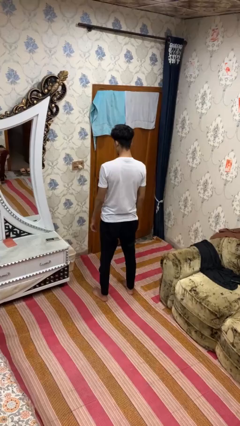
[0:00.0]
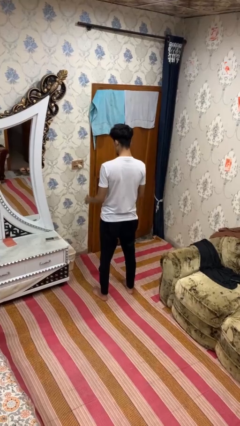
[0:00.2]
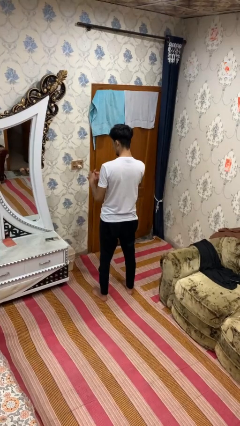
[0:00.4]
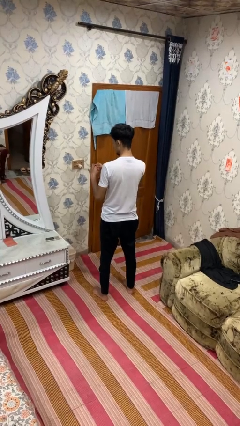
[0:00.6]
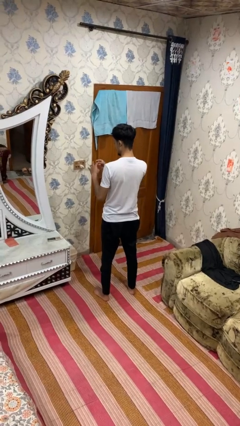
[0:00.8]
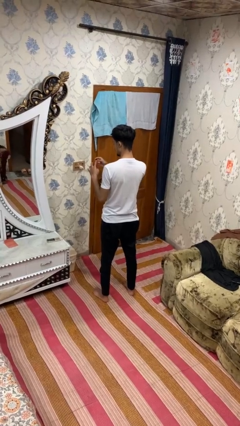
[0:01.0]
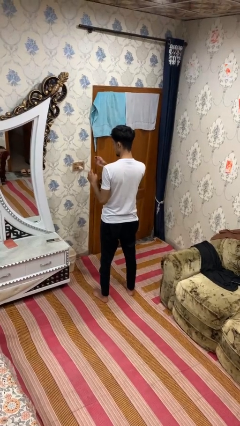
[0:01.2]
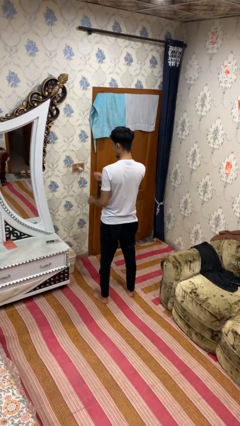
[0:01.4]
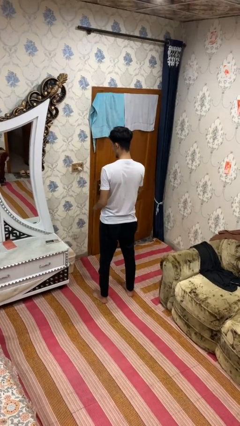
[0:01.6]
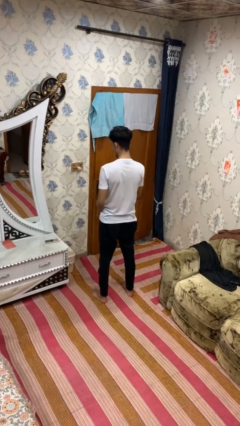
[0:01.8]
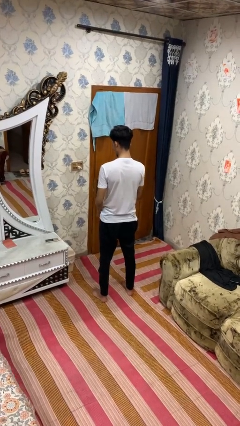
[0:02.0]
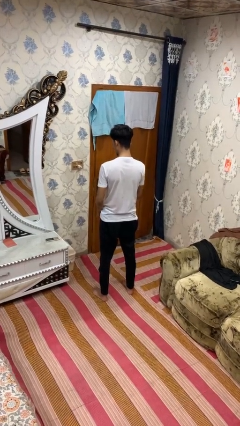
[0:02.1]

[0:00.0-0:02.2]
person takes off ring

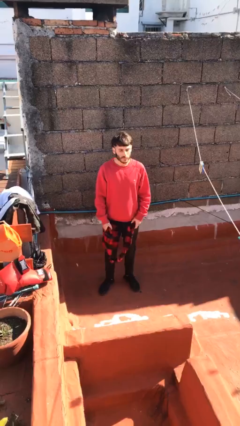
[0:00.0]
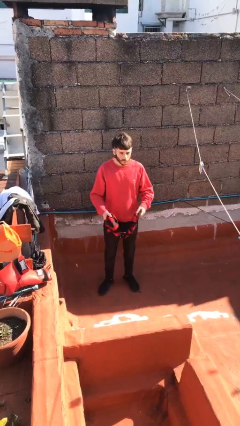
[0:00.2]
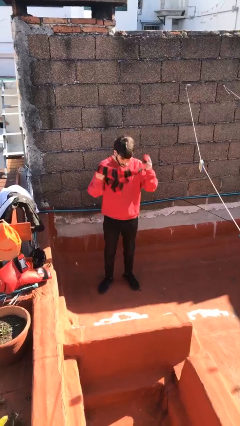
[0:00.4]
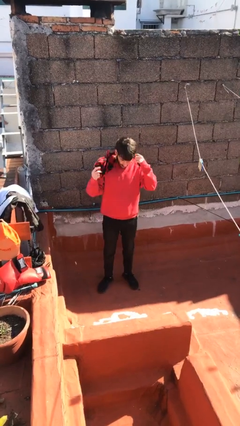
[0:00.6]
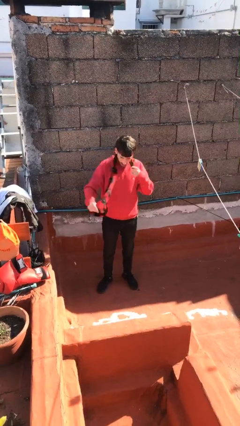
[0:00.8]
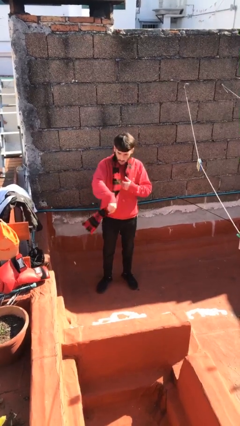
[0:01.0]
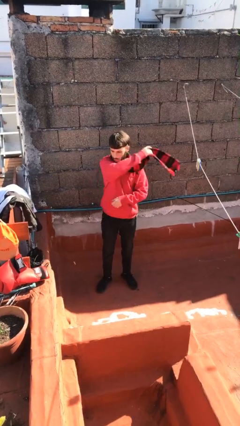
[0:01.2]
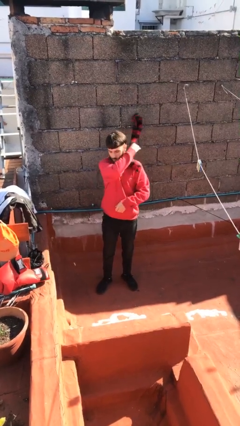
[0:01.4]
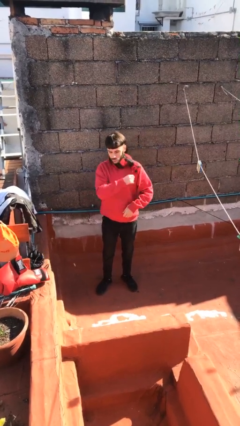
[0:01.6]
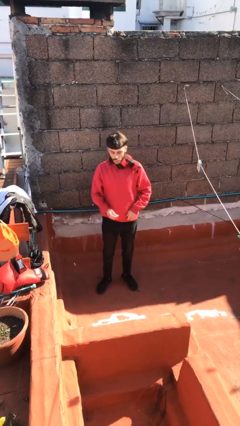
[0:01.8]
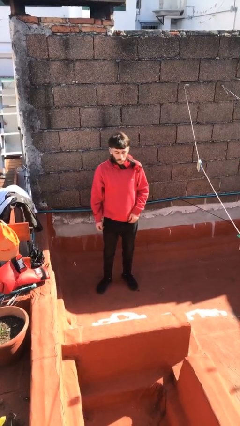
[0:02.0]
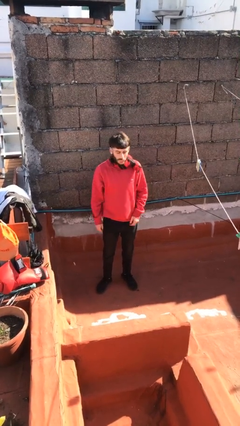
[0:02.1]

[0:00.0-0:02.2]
person puts on scarf

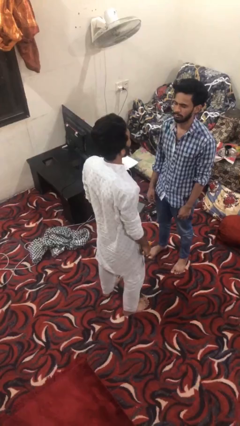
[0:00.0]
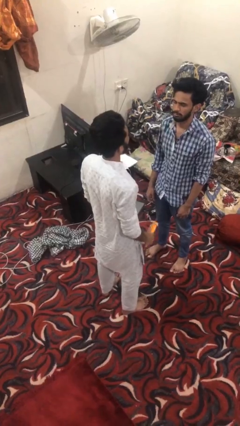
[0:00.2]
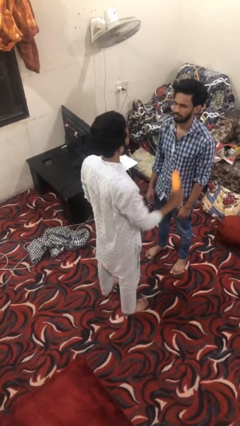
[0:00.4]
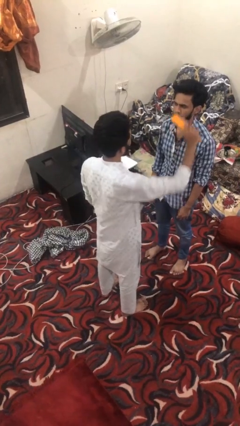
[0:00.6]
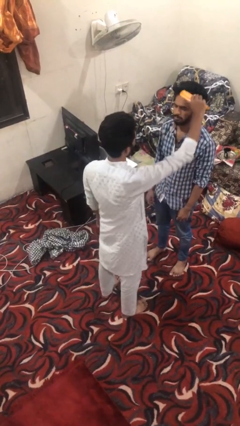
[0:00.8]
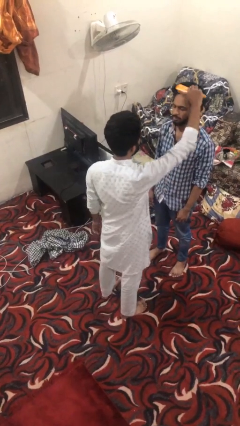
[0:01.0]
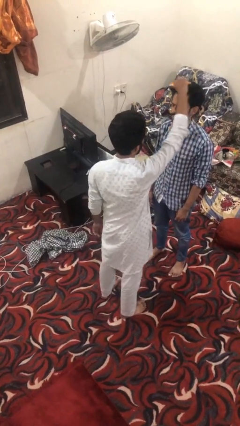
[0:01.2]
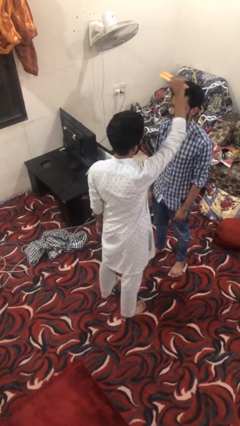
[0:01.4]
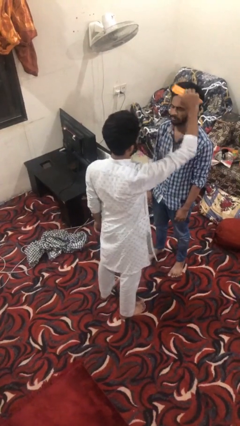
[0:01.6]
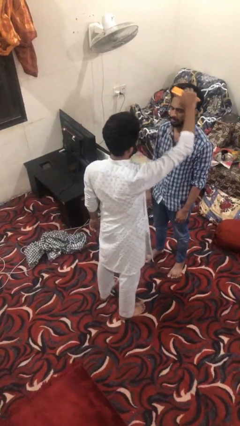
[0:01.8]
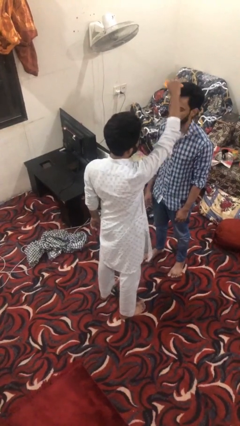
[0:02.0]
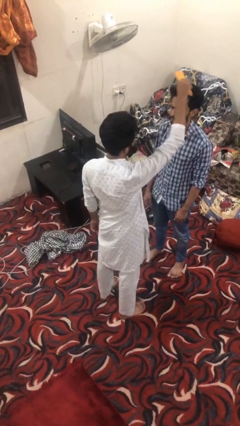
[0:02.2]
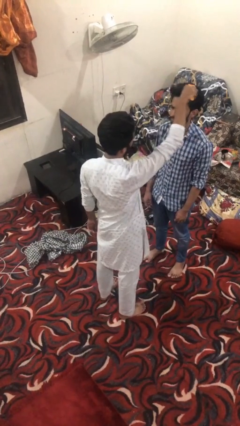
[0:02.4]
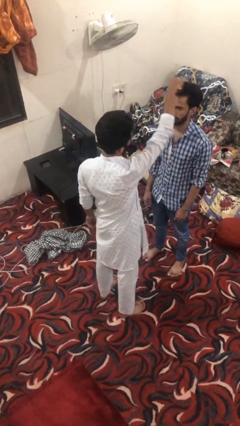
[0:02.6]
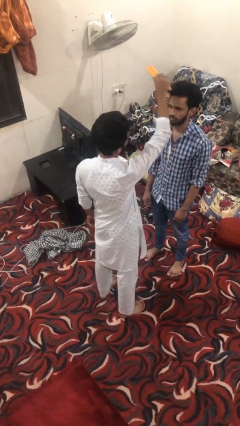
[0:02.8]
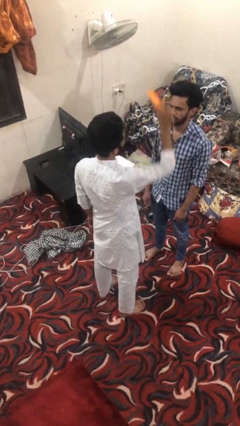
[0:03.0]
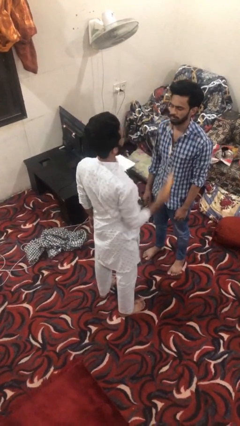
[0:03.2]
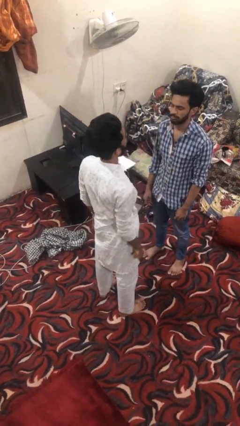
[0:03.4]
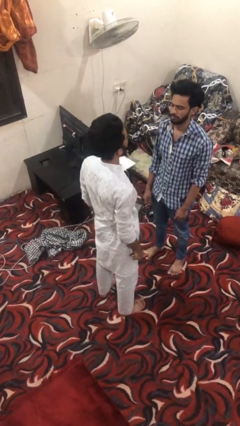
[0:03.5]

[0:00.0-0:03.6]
person brushes hair of person

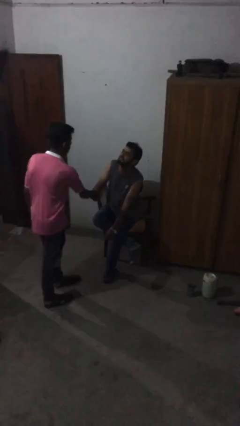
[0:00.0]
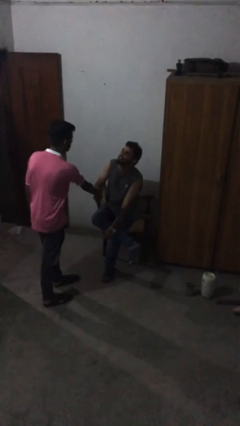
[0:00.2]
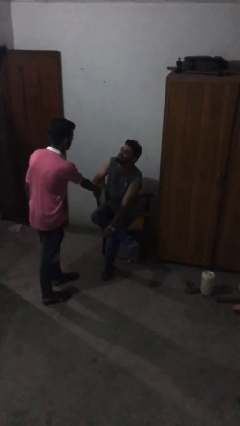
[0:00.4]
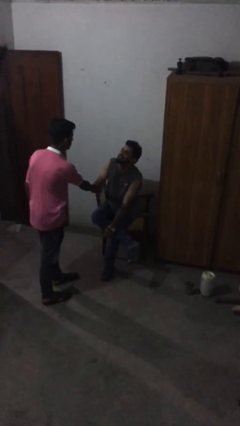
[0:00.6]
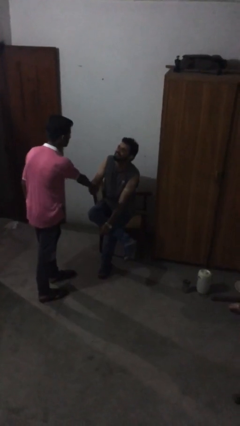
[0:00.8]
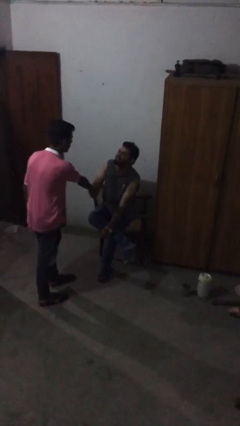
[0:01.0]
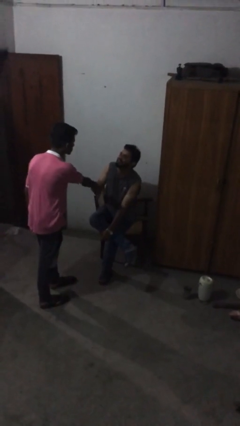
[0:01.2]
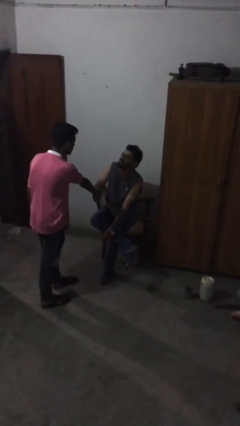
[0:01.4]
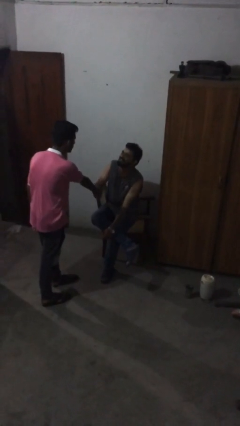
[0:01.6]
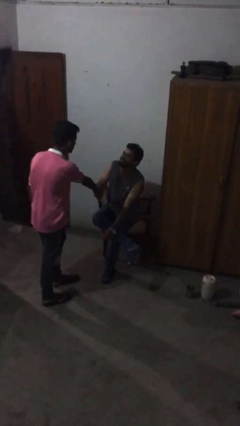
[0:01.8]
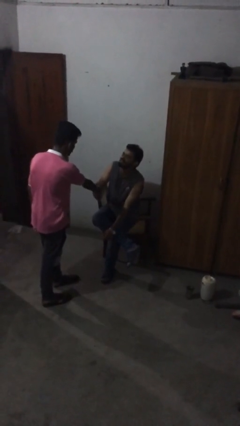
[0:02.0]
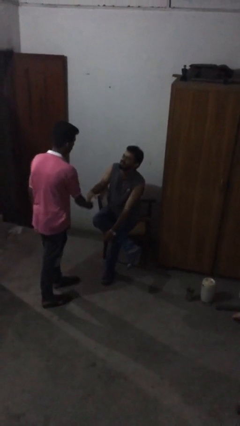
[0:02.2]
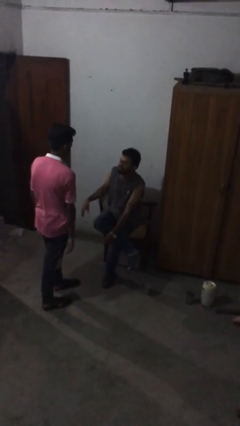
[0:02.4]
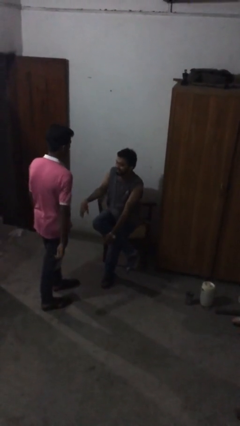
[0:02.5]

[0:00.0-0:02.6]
person shakes hand

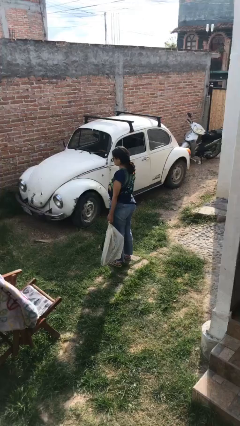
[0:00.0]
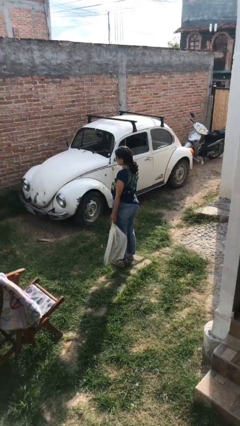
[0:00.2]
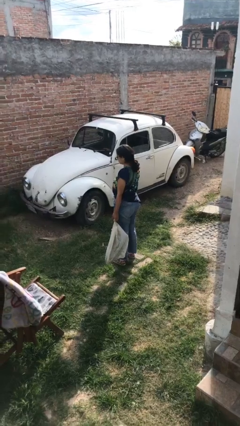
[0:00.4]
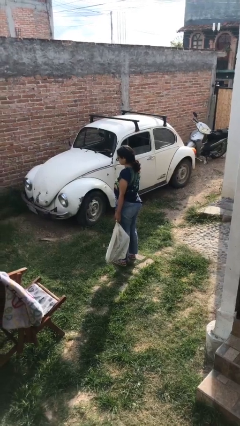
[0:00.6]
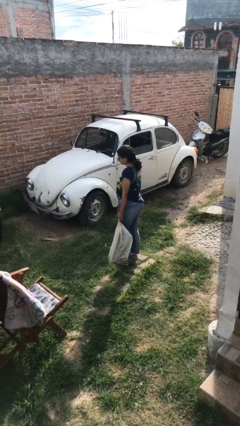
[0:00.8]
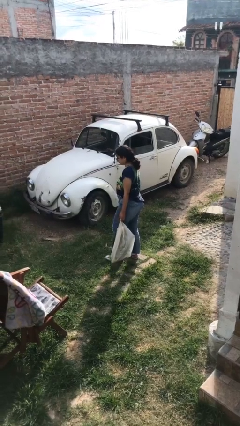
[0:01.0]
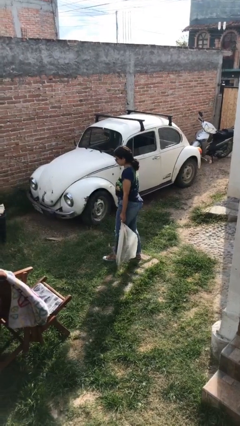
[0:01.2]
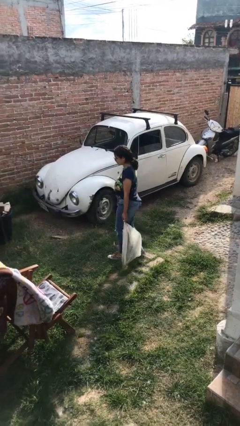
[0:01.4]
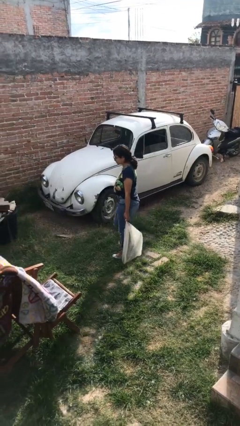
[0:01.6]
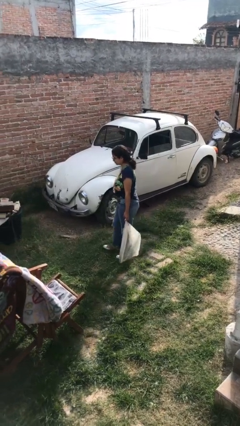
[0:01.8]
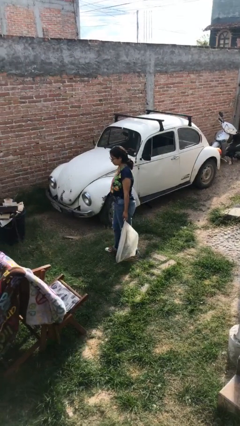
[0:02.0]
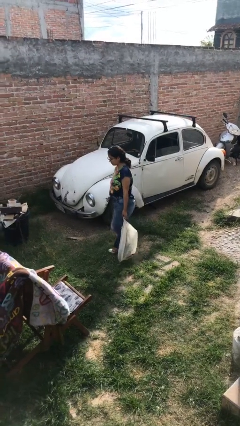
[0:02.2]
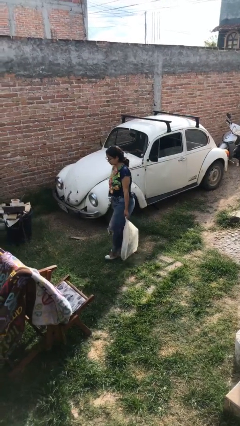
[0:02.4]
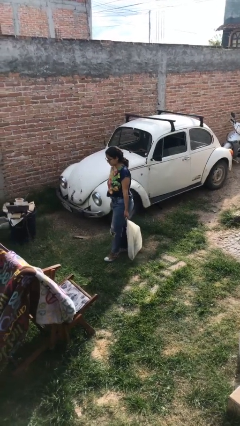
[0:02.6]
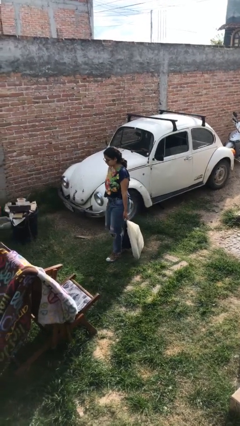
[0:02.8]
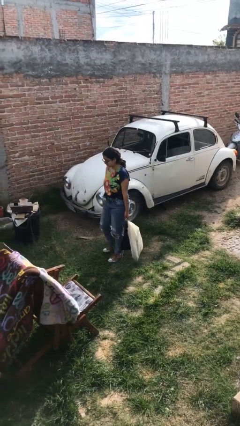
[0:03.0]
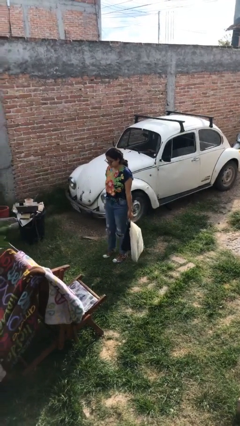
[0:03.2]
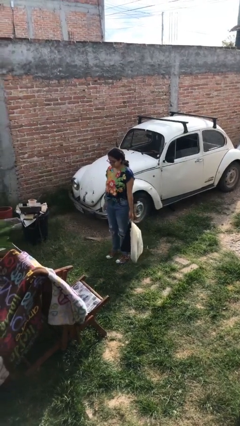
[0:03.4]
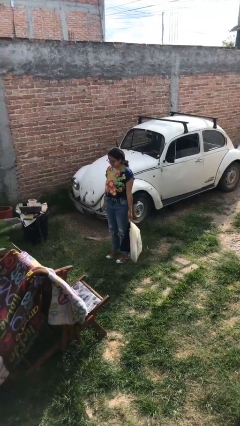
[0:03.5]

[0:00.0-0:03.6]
person carries groceries

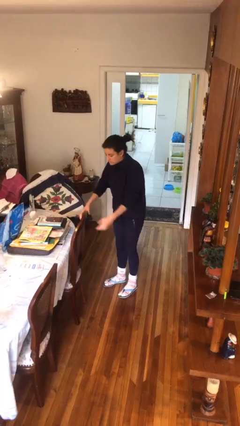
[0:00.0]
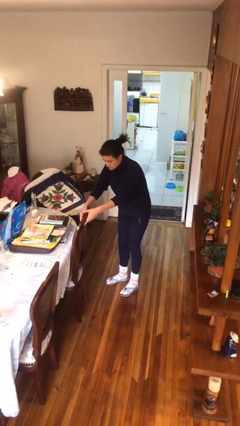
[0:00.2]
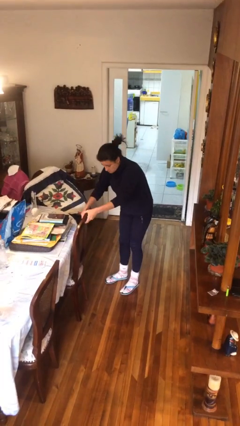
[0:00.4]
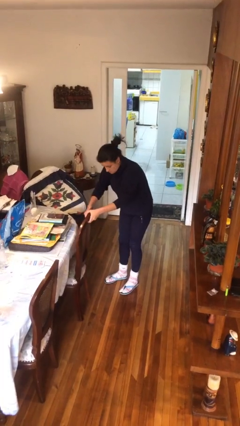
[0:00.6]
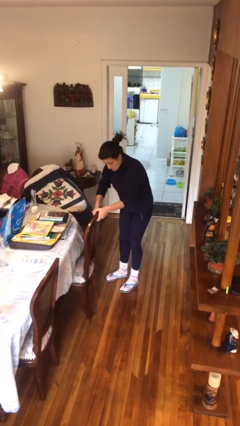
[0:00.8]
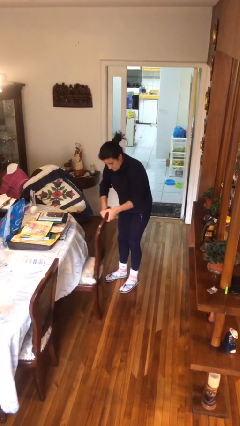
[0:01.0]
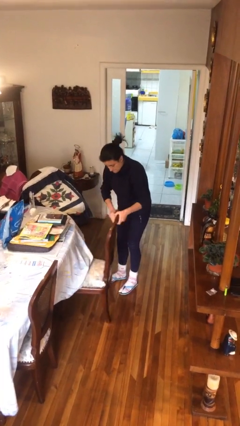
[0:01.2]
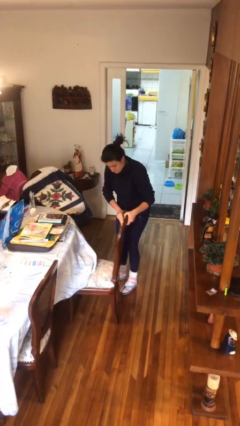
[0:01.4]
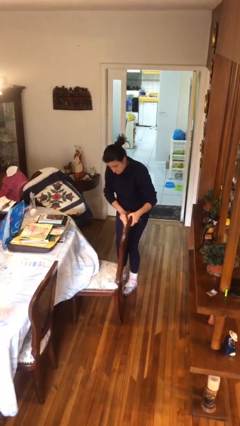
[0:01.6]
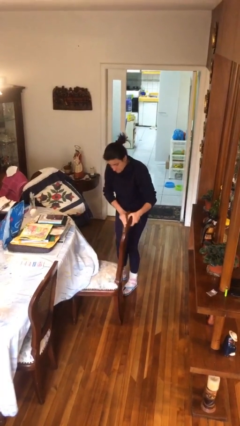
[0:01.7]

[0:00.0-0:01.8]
person pulls out chair

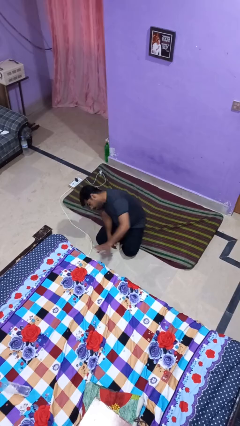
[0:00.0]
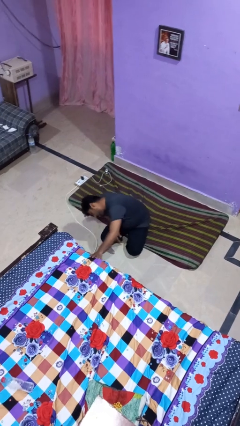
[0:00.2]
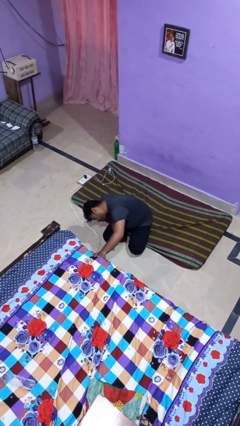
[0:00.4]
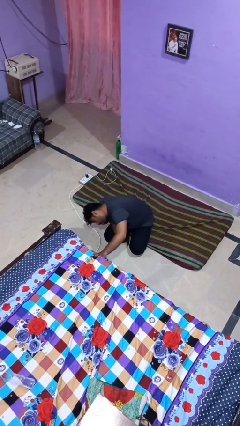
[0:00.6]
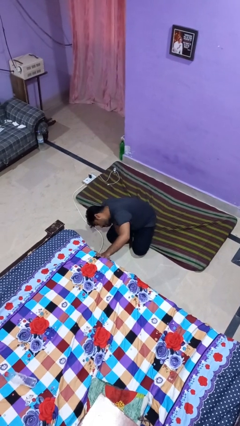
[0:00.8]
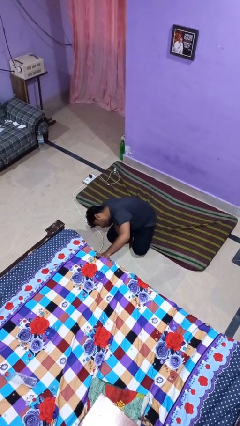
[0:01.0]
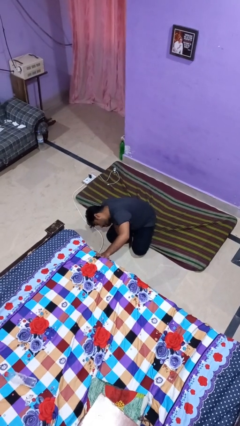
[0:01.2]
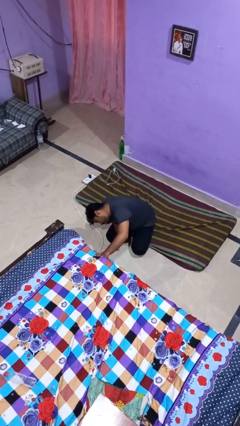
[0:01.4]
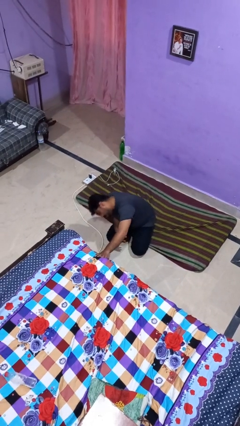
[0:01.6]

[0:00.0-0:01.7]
person searches under bed
